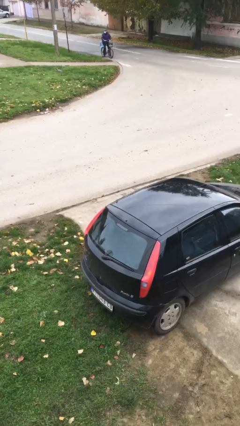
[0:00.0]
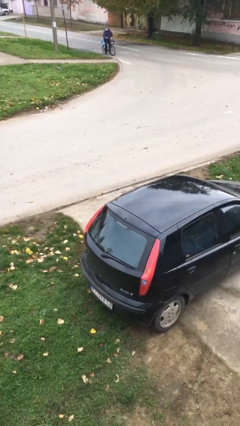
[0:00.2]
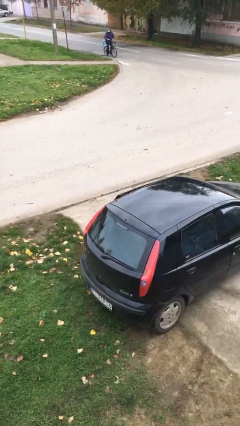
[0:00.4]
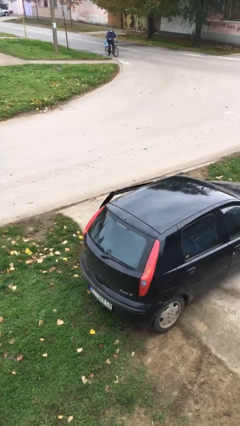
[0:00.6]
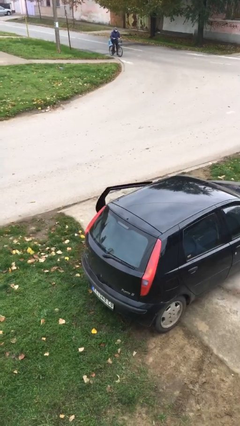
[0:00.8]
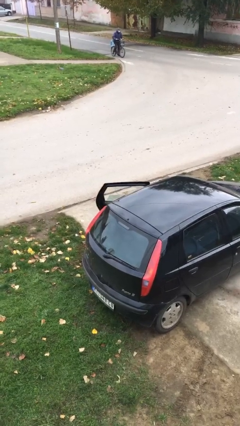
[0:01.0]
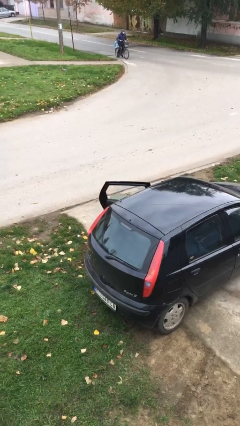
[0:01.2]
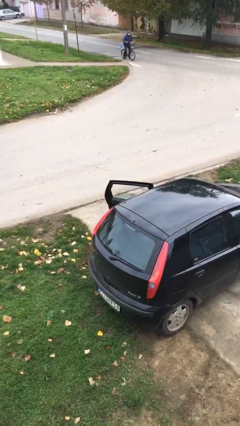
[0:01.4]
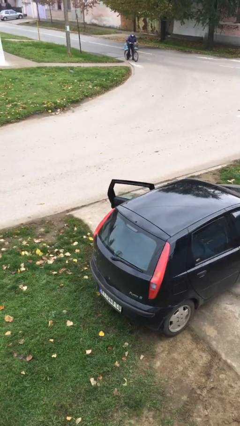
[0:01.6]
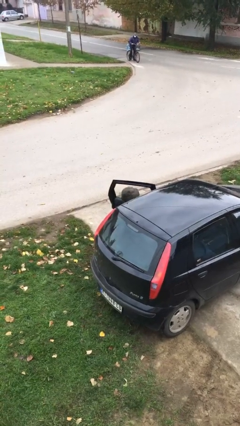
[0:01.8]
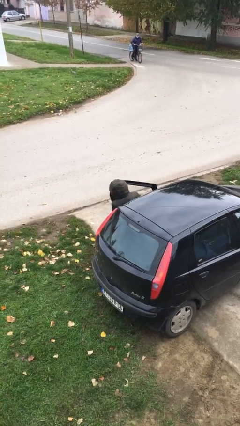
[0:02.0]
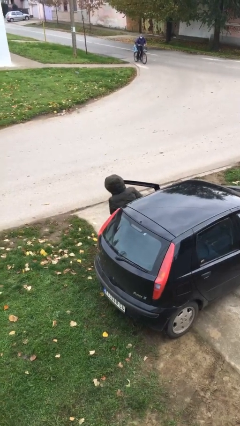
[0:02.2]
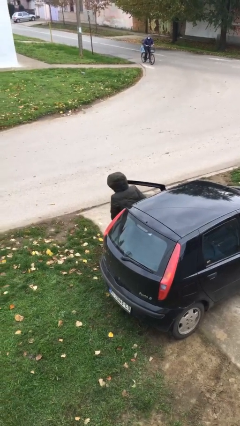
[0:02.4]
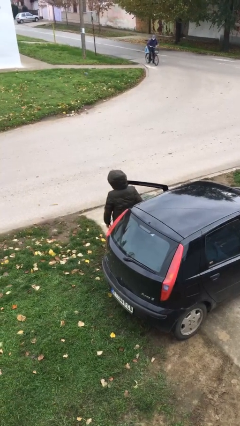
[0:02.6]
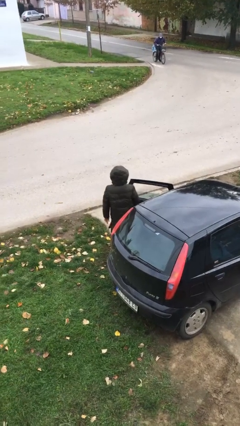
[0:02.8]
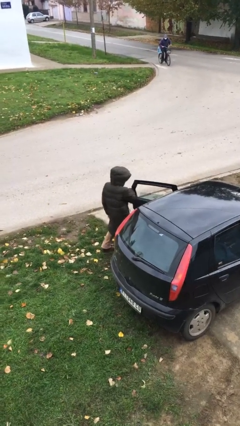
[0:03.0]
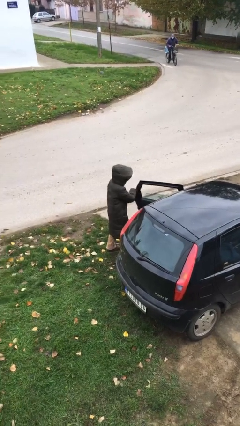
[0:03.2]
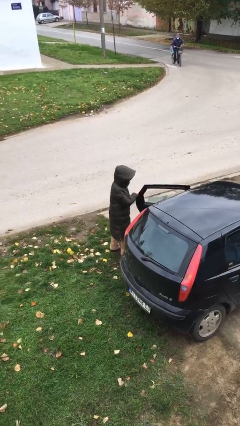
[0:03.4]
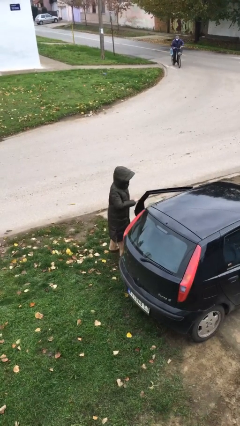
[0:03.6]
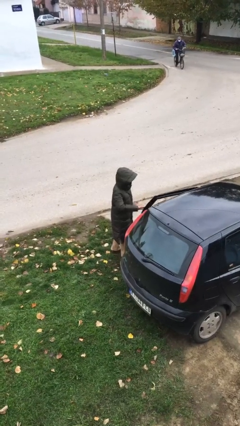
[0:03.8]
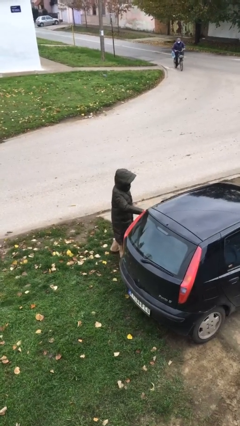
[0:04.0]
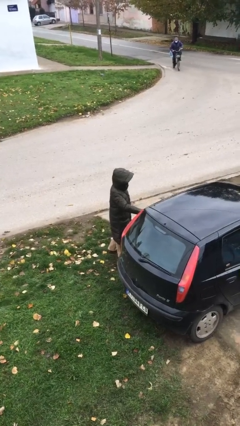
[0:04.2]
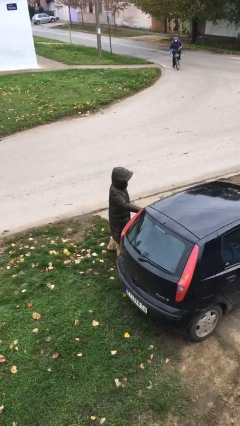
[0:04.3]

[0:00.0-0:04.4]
person exits car

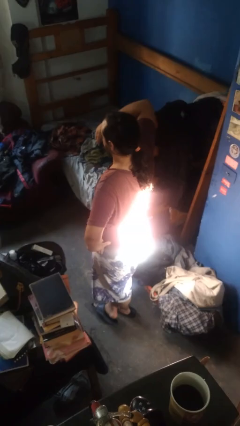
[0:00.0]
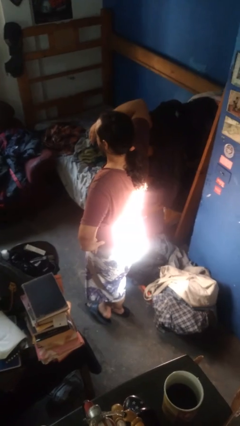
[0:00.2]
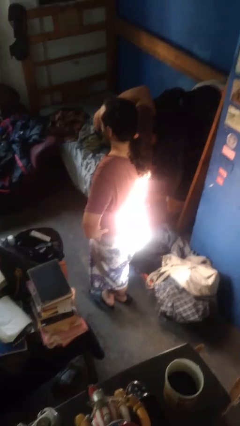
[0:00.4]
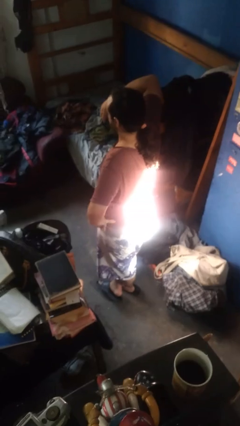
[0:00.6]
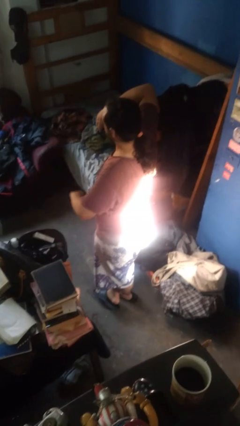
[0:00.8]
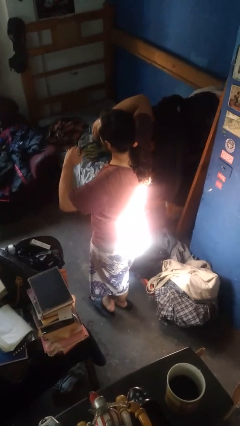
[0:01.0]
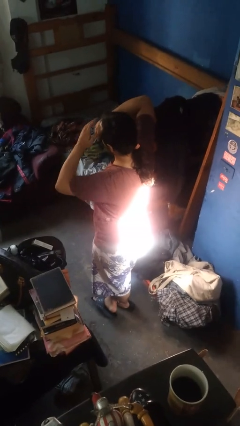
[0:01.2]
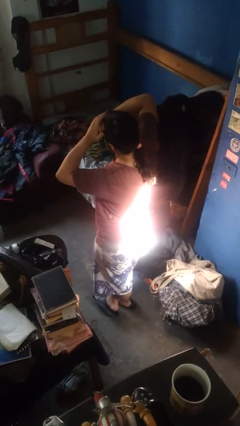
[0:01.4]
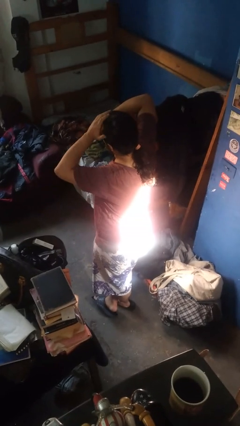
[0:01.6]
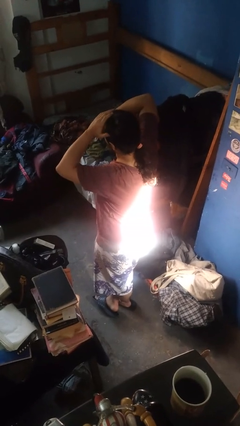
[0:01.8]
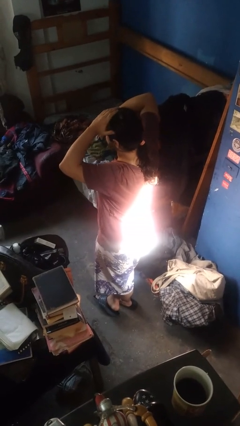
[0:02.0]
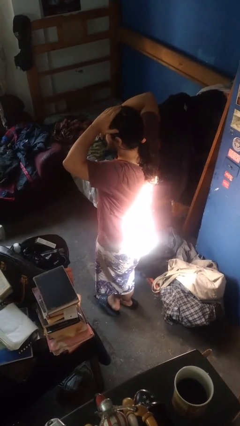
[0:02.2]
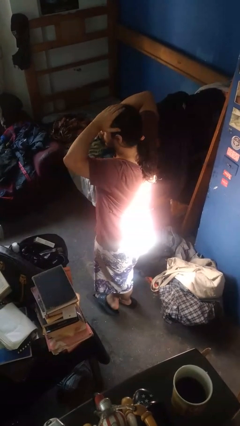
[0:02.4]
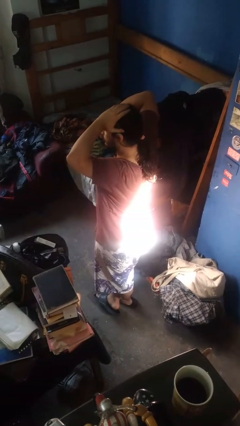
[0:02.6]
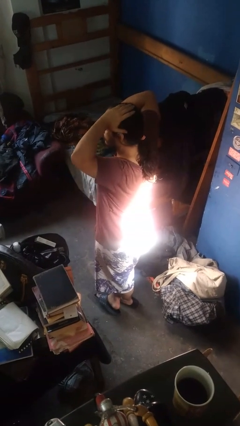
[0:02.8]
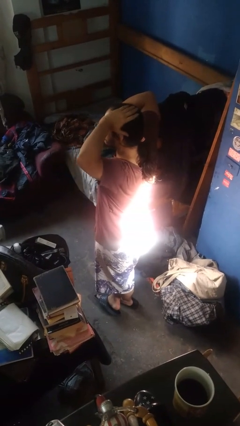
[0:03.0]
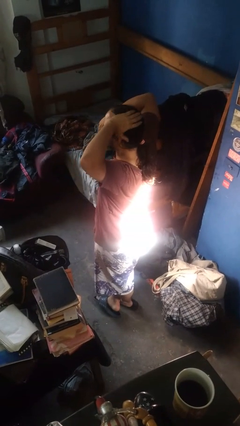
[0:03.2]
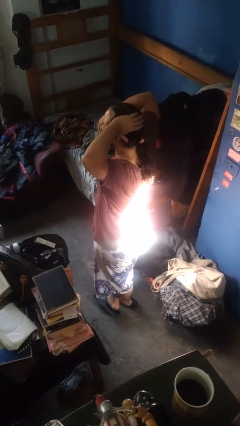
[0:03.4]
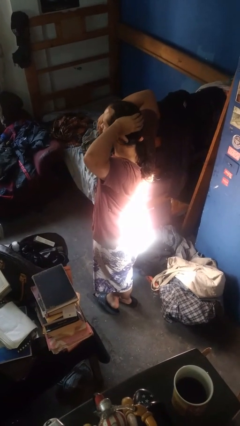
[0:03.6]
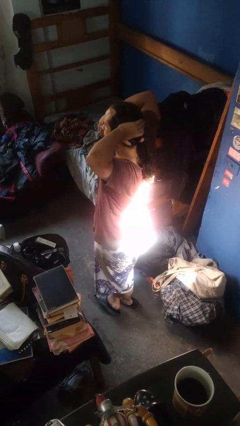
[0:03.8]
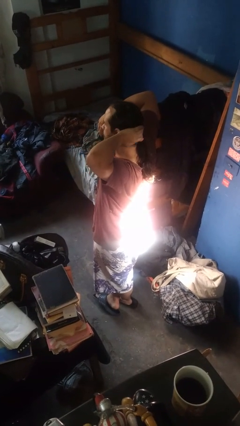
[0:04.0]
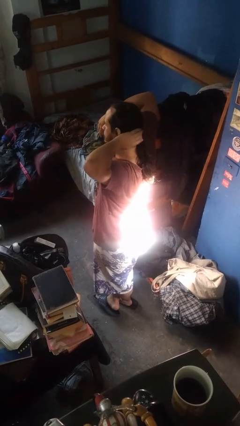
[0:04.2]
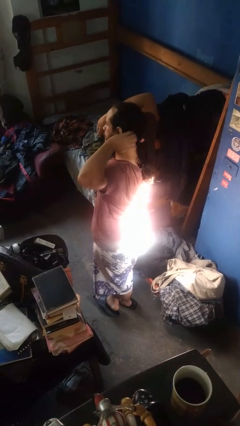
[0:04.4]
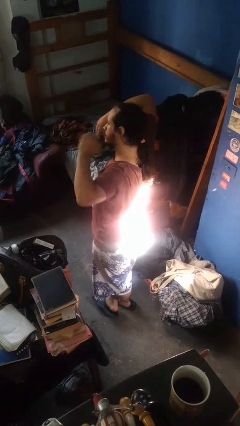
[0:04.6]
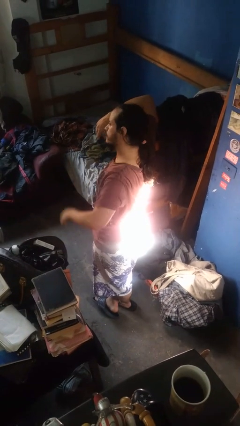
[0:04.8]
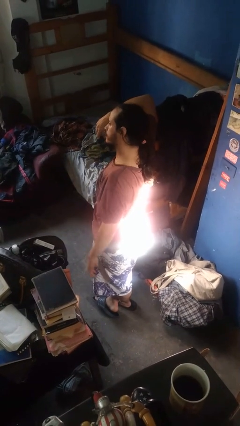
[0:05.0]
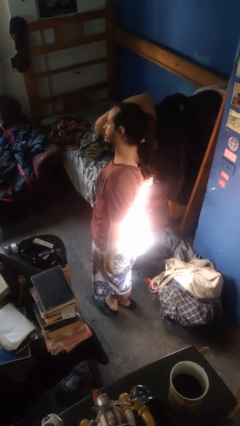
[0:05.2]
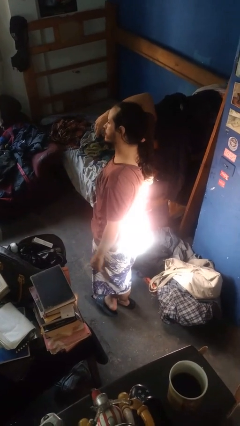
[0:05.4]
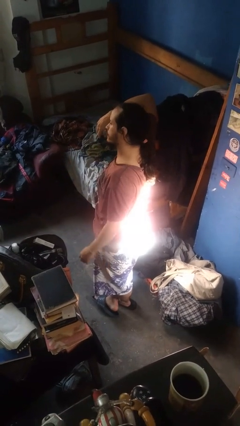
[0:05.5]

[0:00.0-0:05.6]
person strokes hair

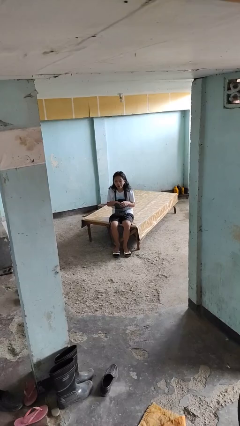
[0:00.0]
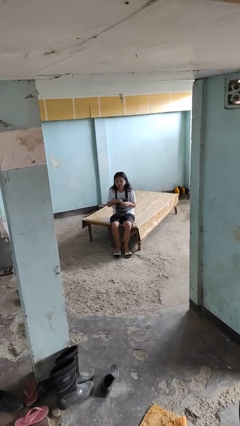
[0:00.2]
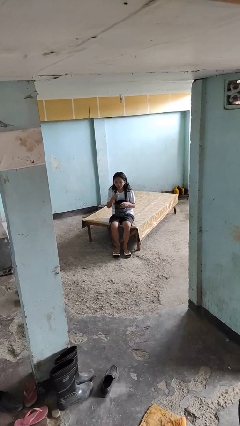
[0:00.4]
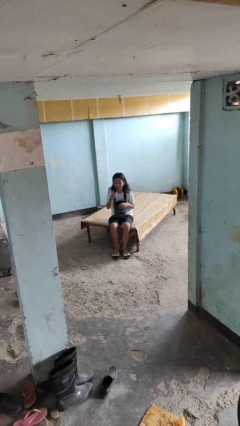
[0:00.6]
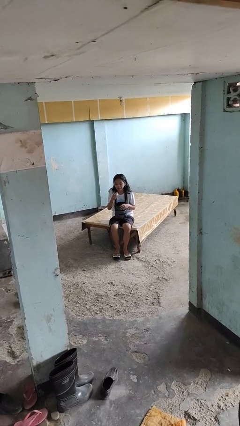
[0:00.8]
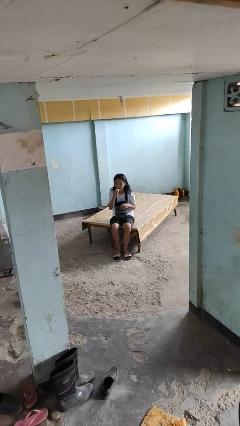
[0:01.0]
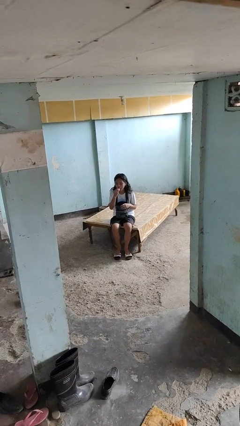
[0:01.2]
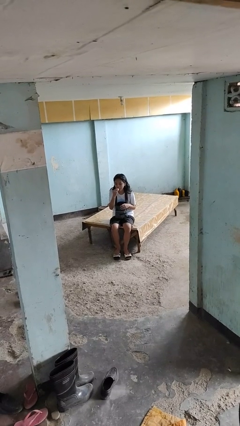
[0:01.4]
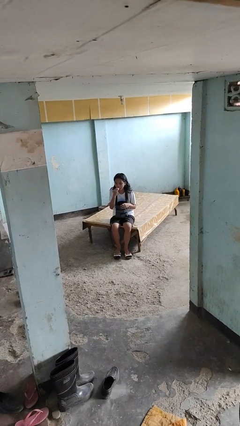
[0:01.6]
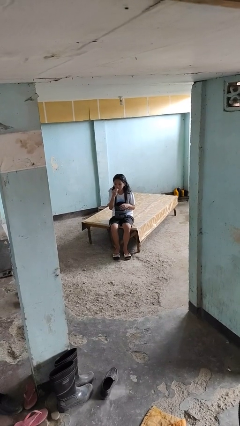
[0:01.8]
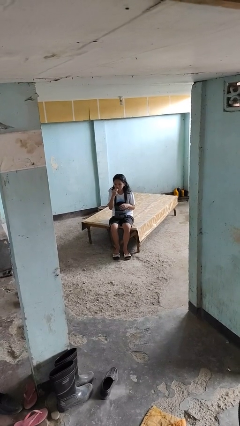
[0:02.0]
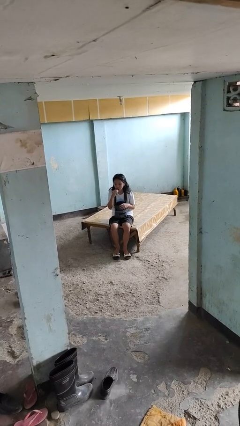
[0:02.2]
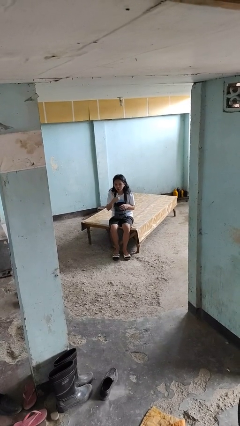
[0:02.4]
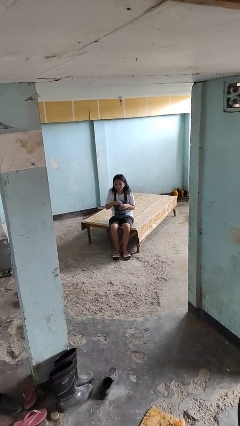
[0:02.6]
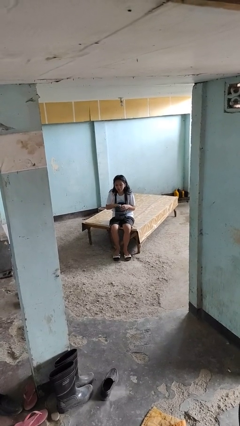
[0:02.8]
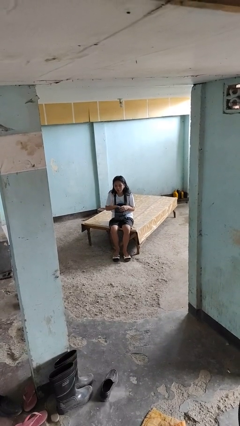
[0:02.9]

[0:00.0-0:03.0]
person eats snack from bag

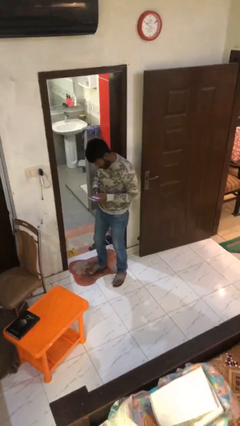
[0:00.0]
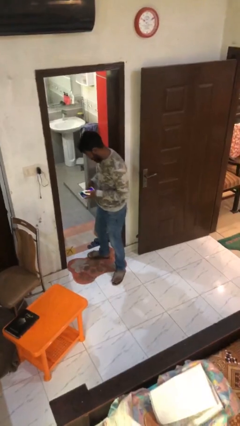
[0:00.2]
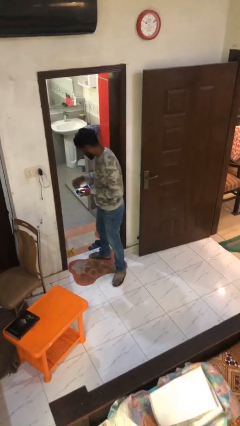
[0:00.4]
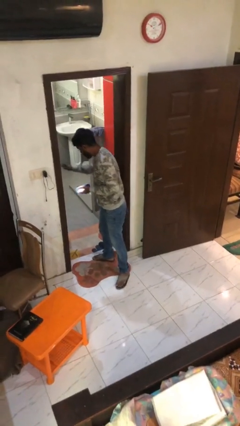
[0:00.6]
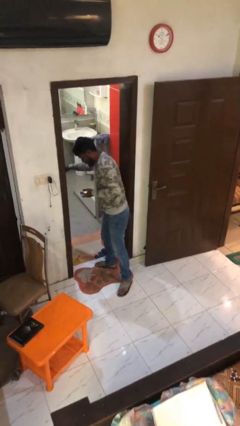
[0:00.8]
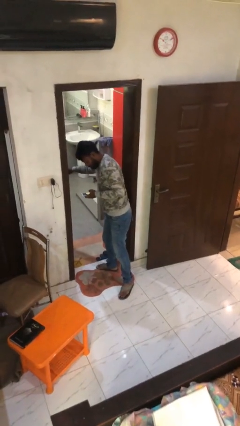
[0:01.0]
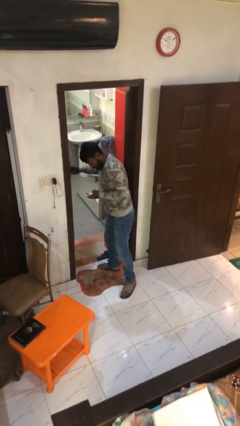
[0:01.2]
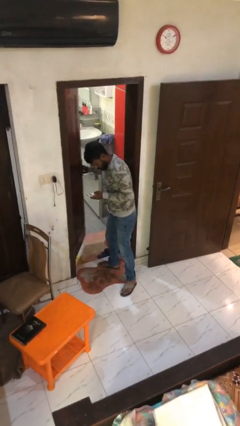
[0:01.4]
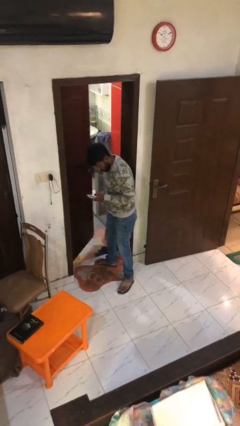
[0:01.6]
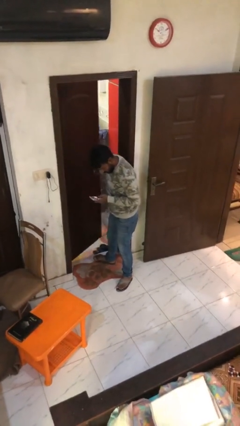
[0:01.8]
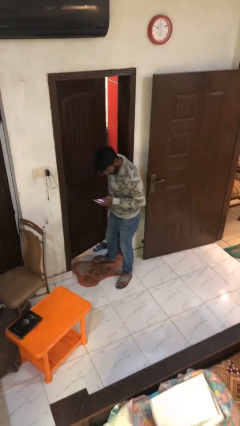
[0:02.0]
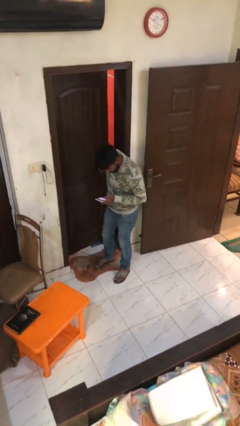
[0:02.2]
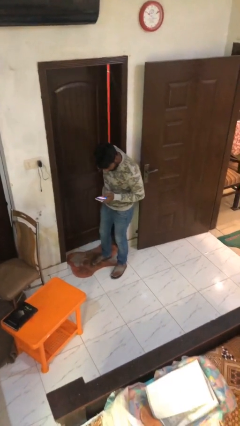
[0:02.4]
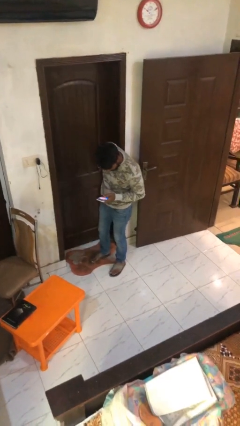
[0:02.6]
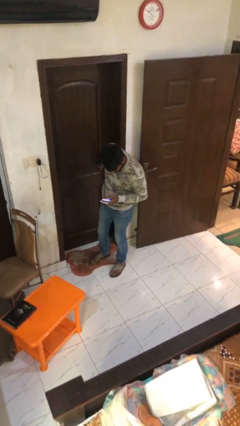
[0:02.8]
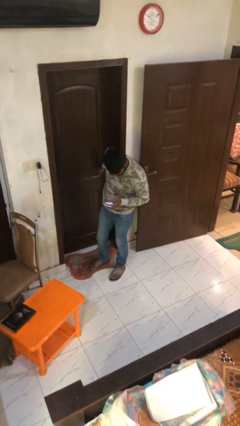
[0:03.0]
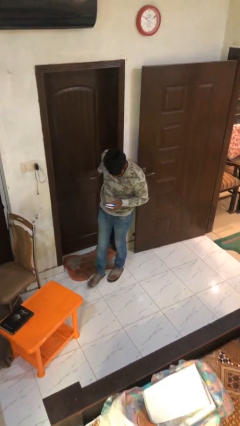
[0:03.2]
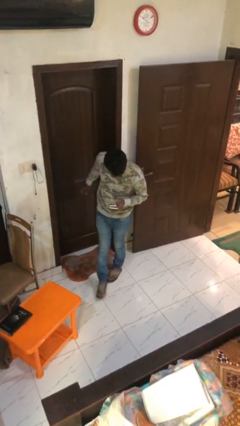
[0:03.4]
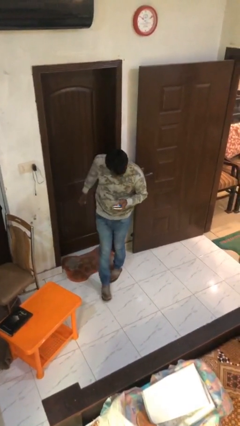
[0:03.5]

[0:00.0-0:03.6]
person closes facility door

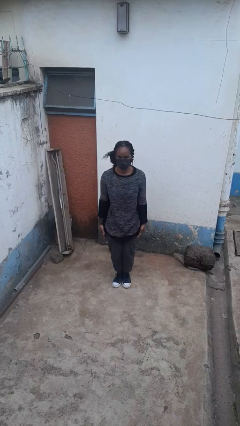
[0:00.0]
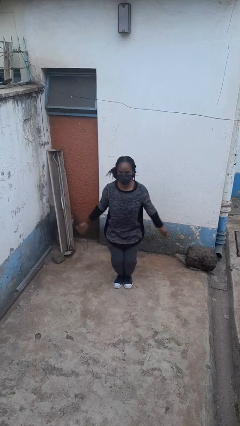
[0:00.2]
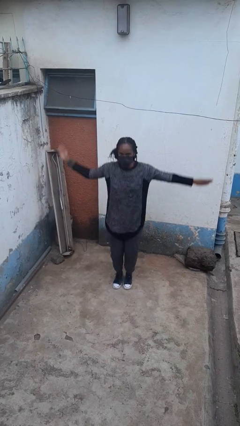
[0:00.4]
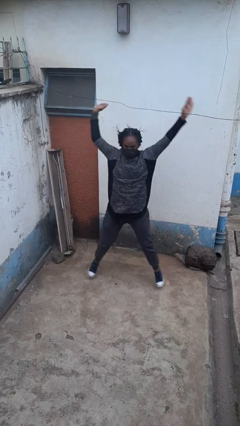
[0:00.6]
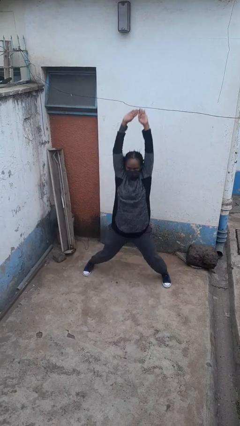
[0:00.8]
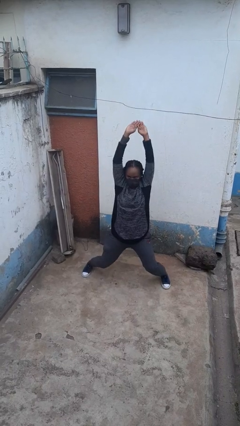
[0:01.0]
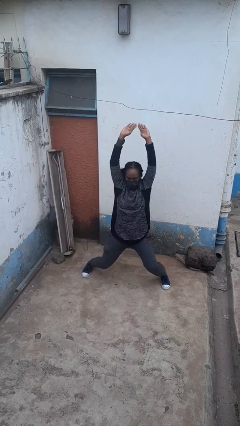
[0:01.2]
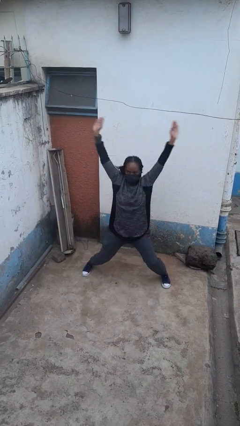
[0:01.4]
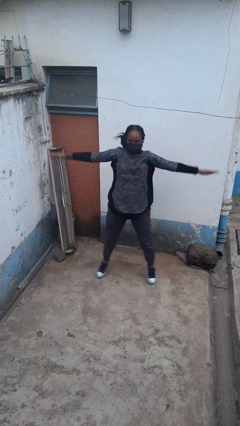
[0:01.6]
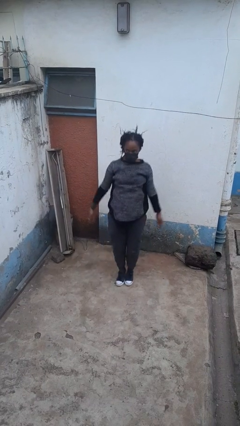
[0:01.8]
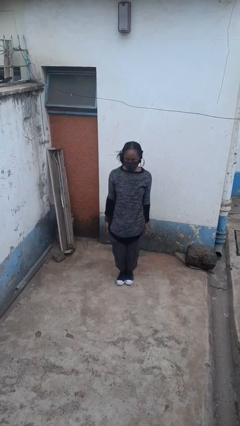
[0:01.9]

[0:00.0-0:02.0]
person exercises with jumping jacks
